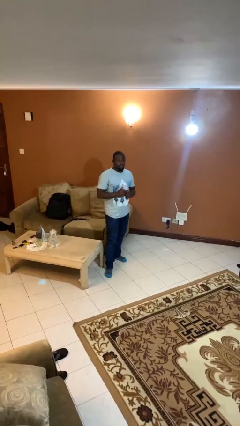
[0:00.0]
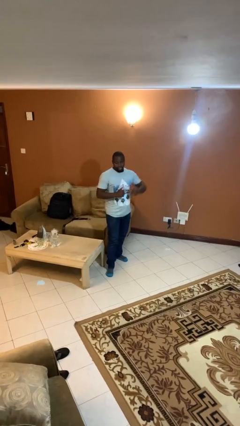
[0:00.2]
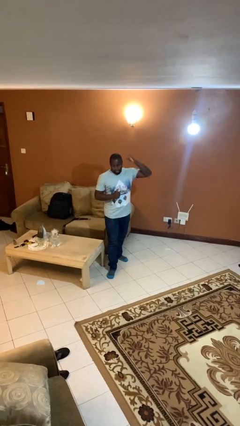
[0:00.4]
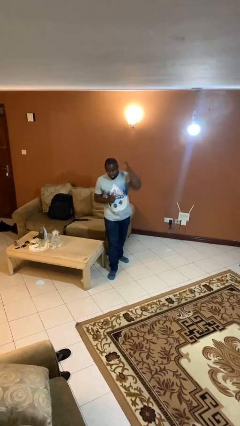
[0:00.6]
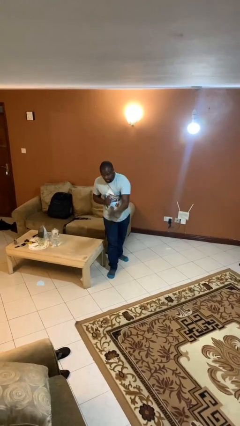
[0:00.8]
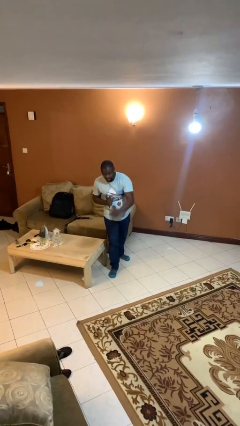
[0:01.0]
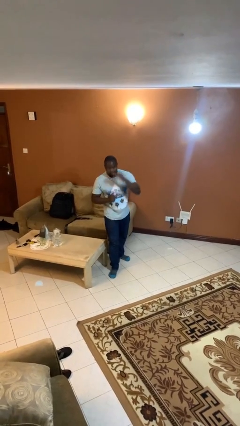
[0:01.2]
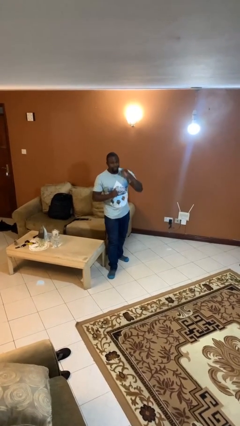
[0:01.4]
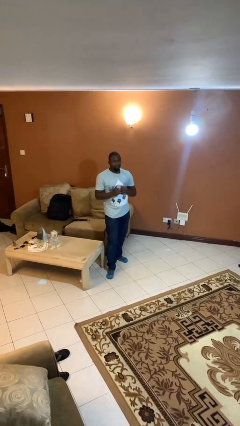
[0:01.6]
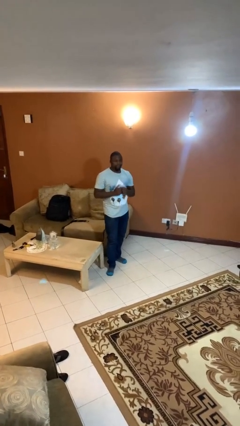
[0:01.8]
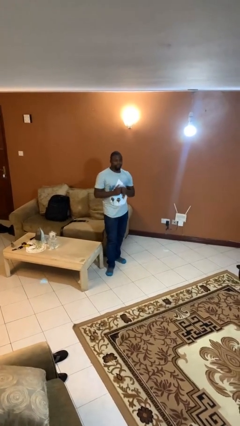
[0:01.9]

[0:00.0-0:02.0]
person karate chop

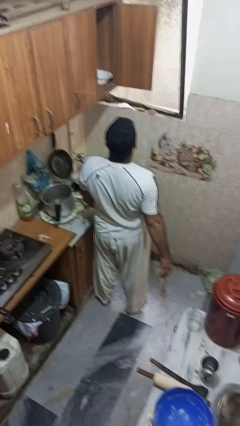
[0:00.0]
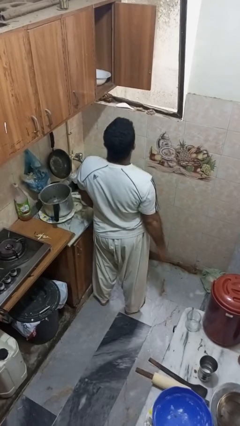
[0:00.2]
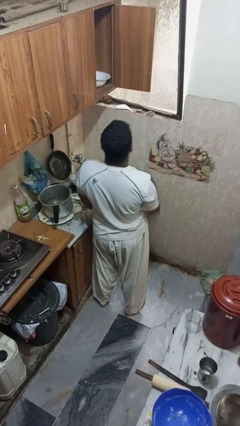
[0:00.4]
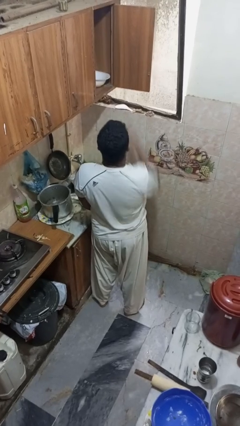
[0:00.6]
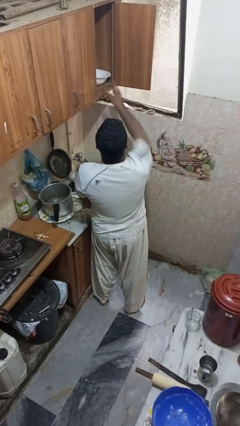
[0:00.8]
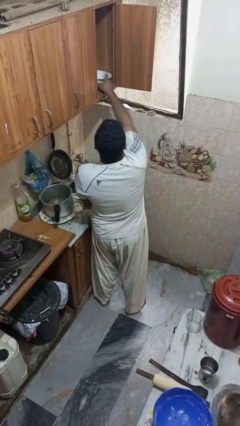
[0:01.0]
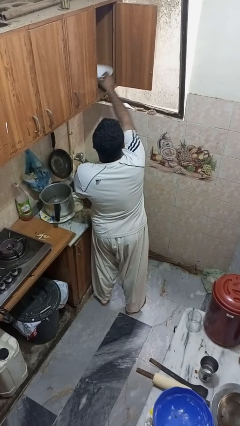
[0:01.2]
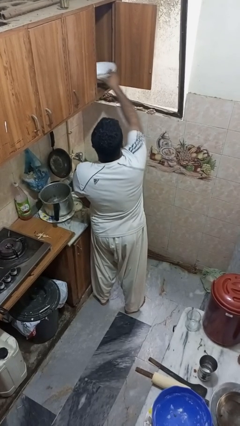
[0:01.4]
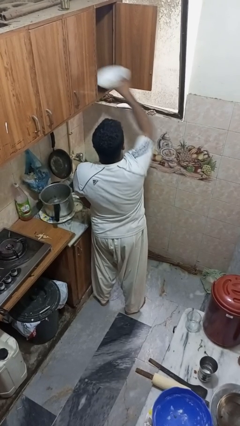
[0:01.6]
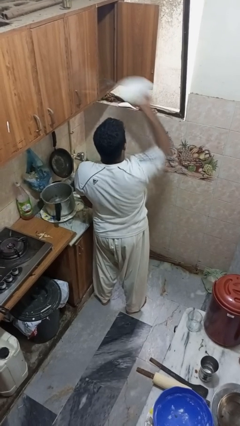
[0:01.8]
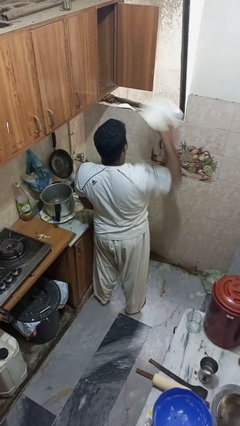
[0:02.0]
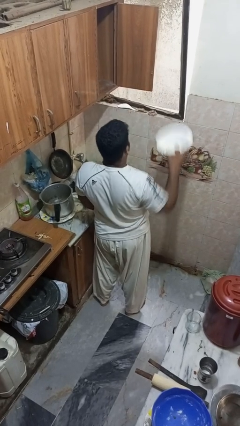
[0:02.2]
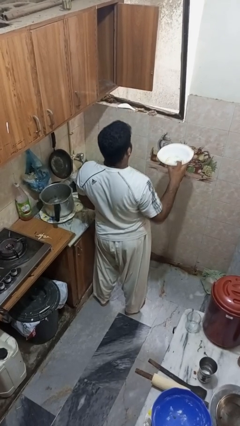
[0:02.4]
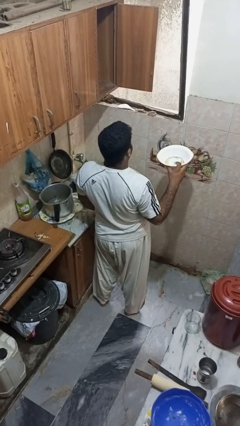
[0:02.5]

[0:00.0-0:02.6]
person takes object from cabinet

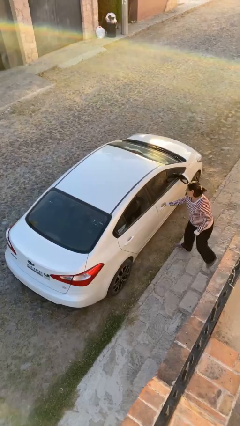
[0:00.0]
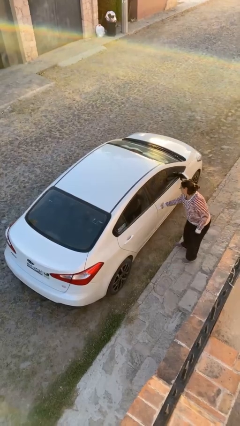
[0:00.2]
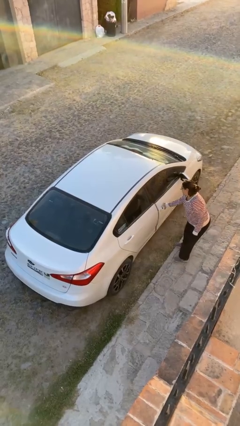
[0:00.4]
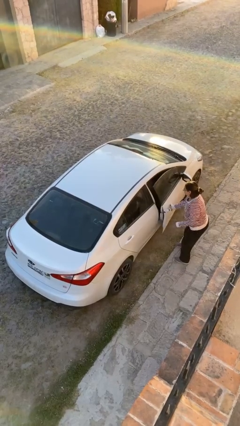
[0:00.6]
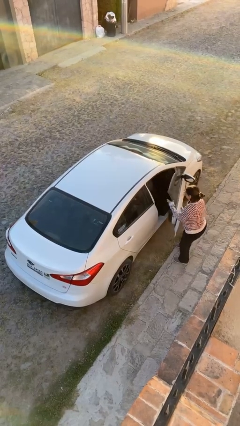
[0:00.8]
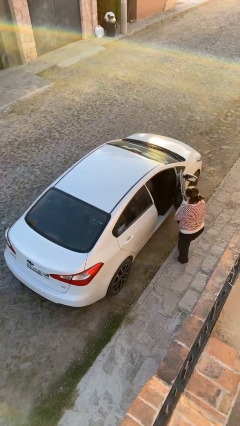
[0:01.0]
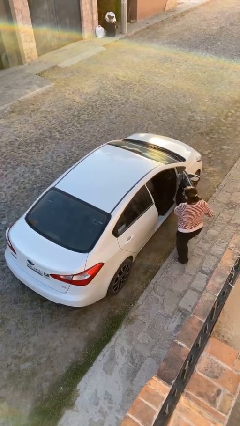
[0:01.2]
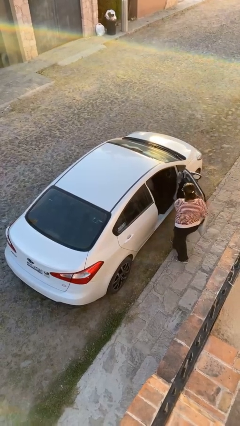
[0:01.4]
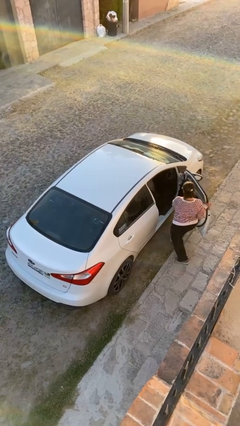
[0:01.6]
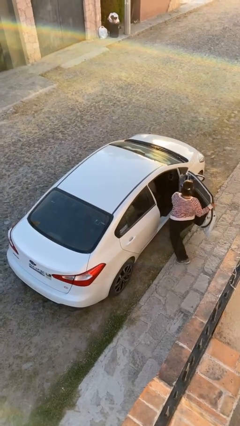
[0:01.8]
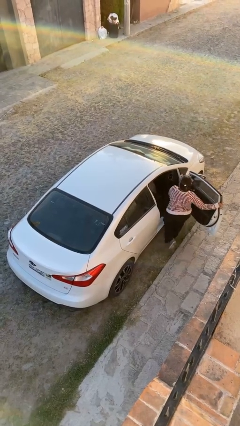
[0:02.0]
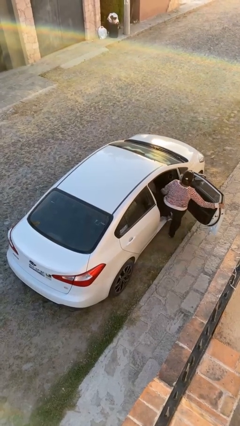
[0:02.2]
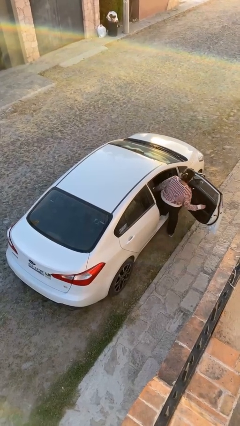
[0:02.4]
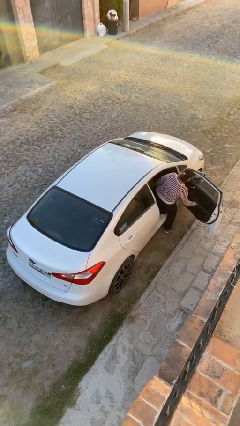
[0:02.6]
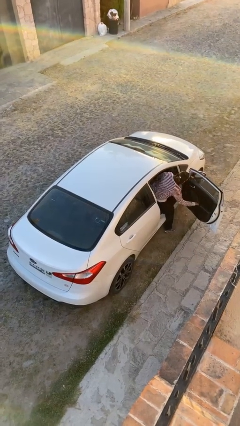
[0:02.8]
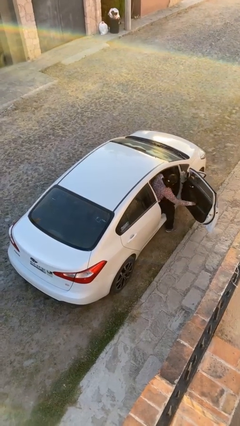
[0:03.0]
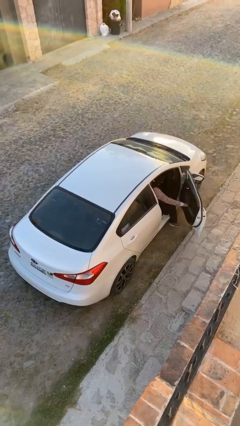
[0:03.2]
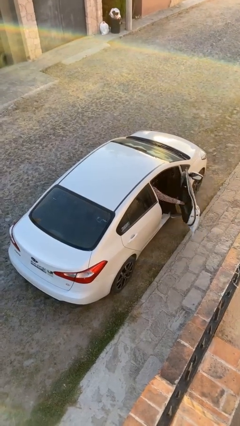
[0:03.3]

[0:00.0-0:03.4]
car picks up person

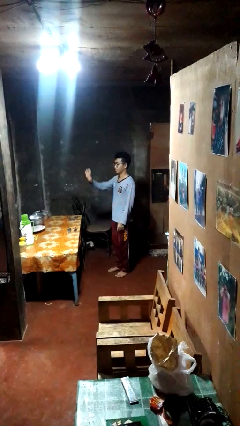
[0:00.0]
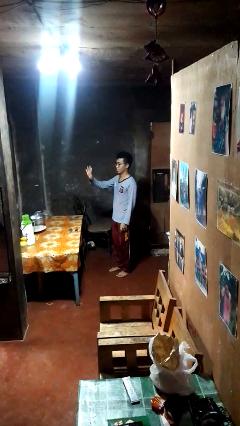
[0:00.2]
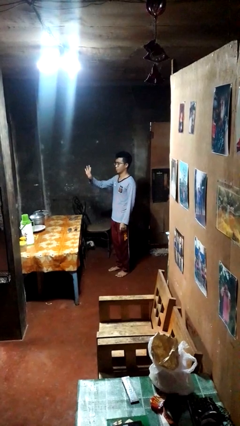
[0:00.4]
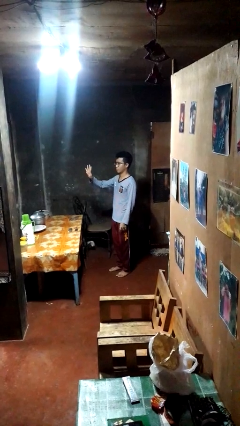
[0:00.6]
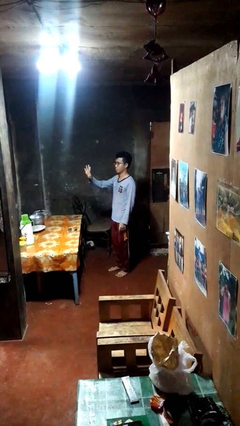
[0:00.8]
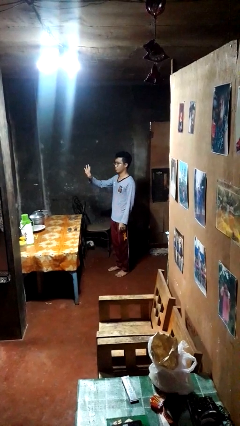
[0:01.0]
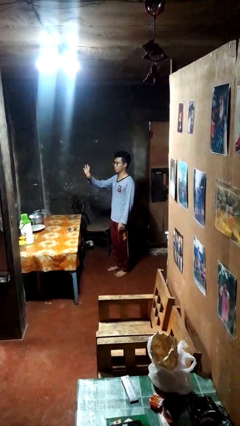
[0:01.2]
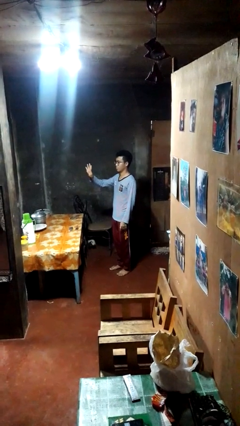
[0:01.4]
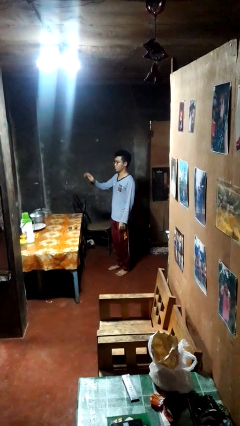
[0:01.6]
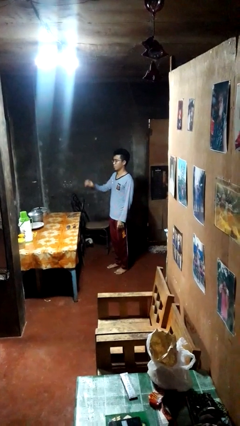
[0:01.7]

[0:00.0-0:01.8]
person gestures number four

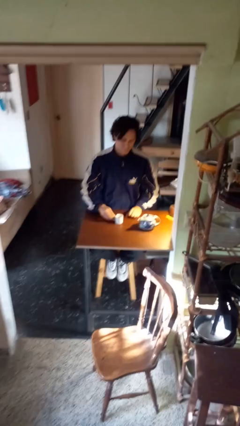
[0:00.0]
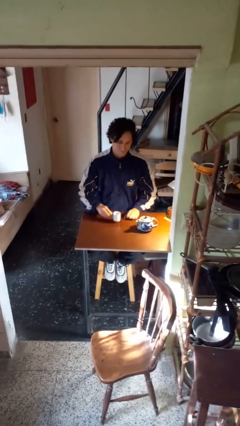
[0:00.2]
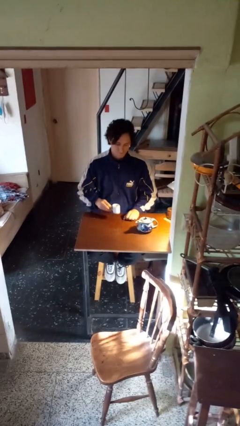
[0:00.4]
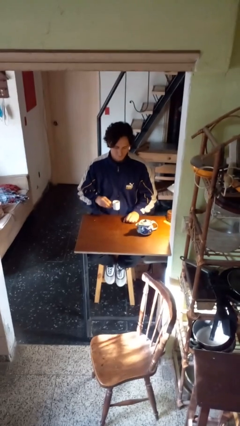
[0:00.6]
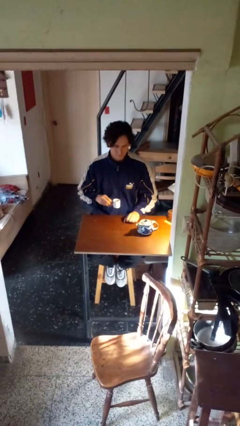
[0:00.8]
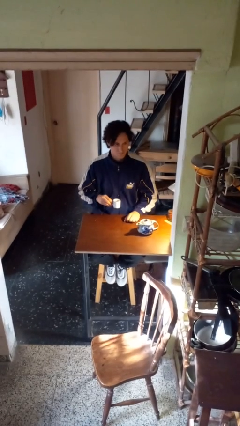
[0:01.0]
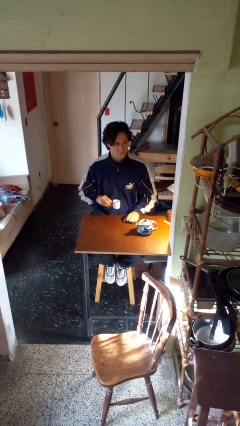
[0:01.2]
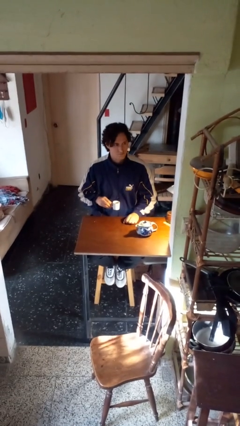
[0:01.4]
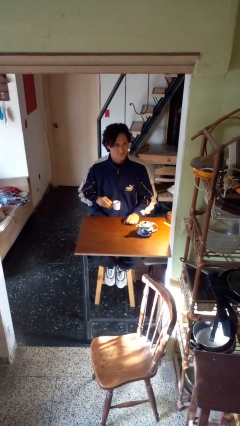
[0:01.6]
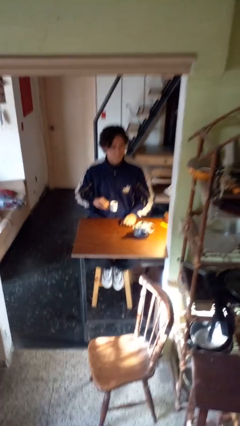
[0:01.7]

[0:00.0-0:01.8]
person picks up object from table

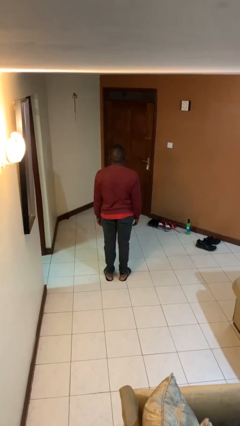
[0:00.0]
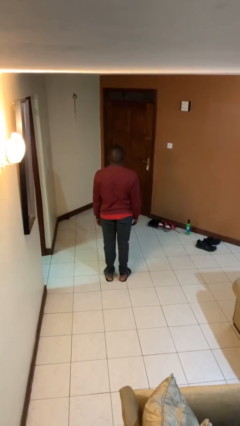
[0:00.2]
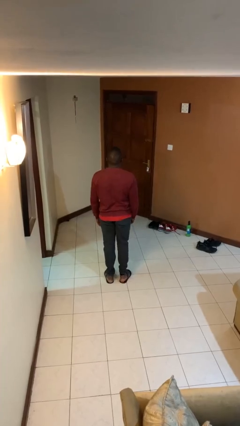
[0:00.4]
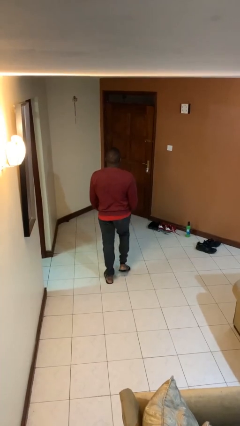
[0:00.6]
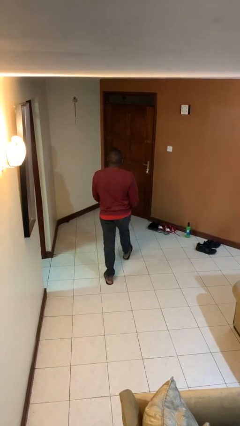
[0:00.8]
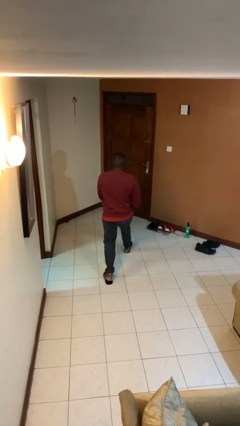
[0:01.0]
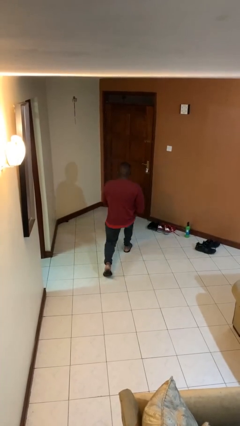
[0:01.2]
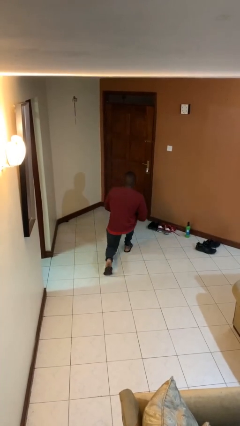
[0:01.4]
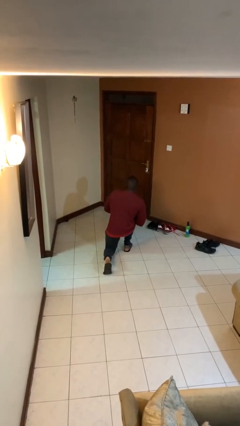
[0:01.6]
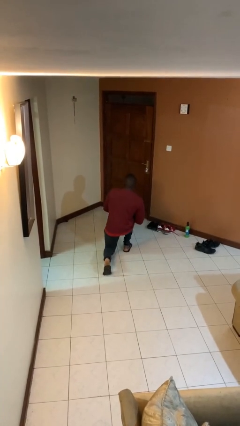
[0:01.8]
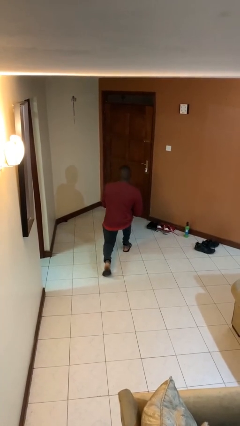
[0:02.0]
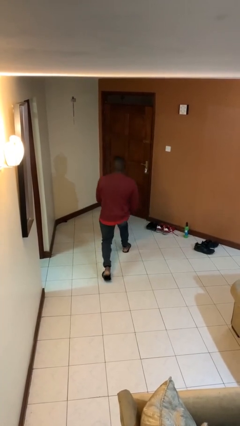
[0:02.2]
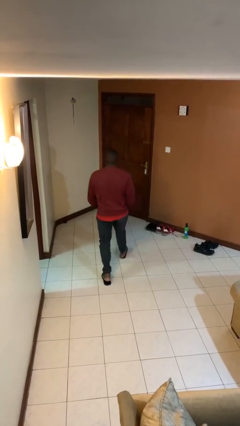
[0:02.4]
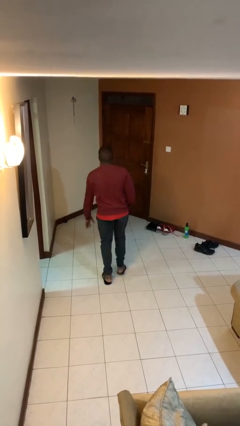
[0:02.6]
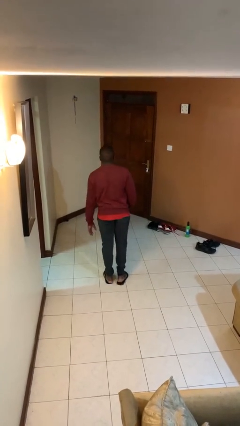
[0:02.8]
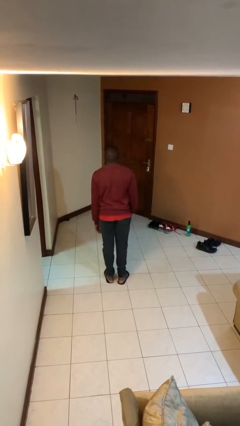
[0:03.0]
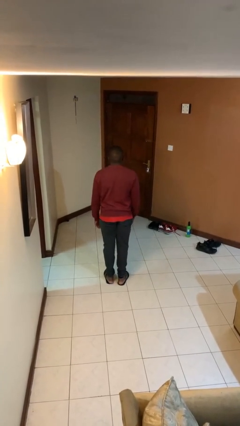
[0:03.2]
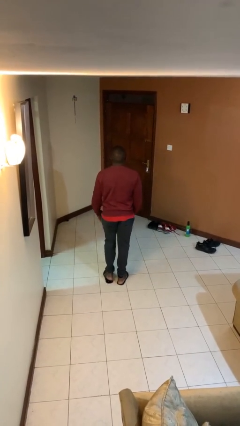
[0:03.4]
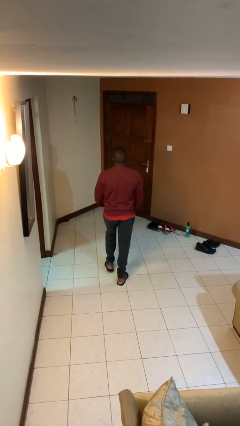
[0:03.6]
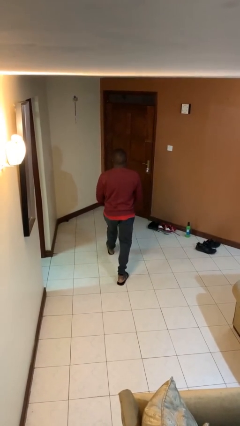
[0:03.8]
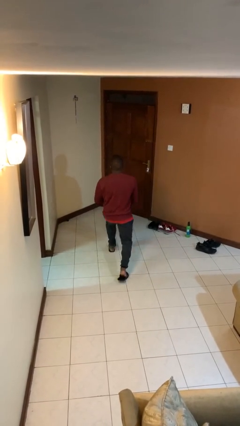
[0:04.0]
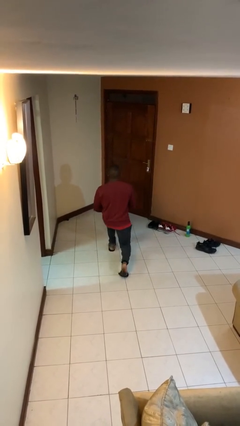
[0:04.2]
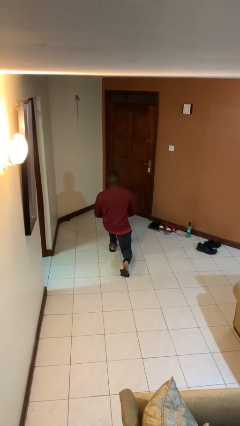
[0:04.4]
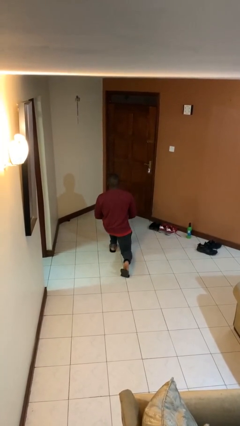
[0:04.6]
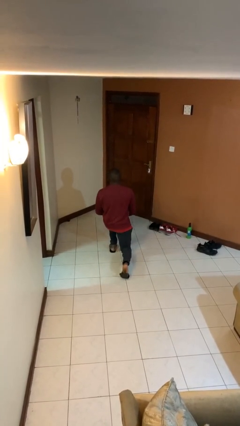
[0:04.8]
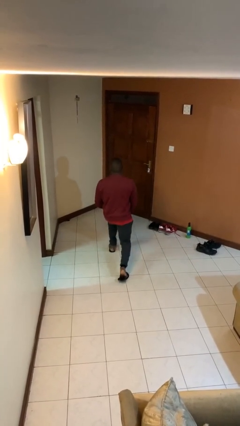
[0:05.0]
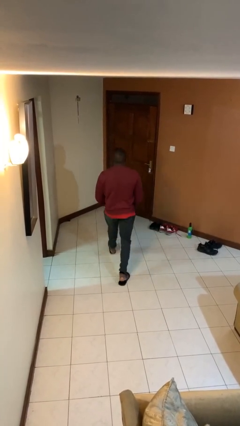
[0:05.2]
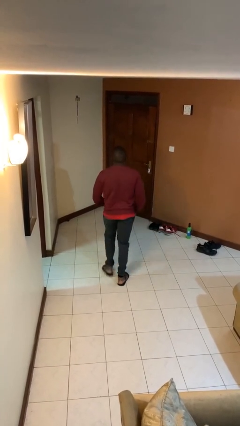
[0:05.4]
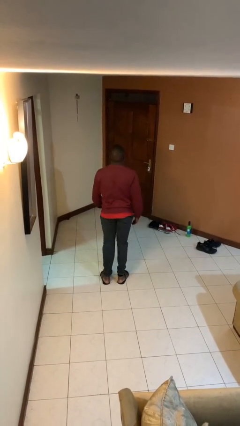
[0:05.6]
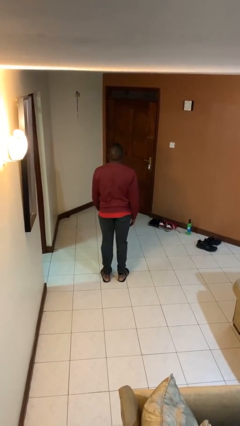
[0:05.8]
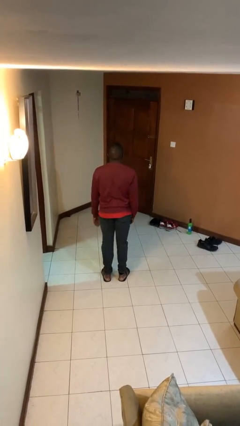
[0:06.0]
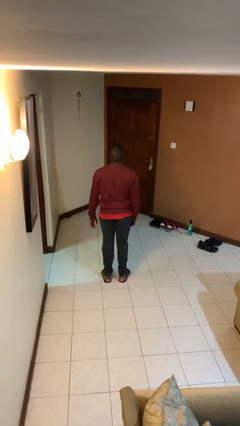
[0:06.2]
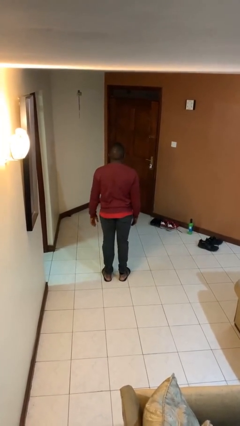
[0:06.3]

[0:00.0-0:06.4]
person exercises with lunges
